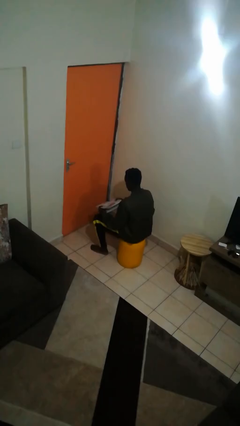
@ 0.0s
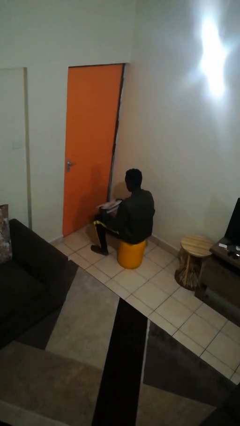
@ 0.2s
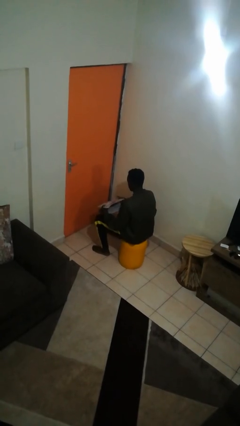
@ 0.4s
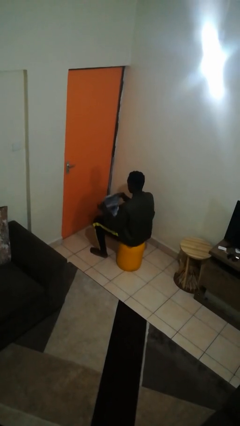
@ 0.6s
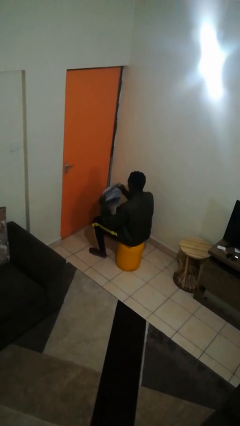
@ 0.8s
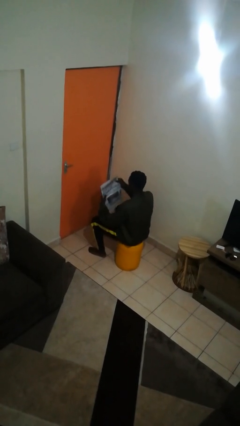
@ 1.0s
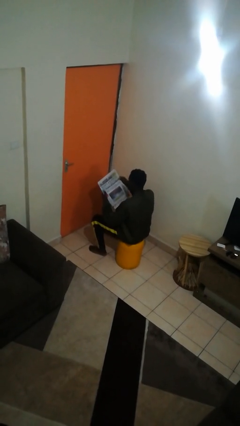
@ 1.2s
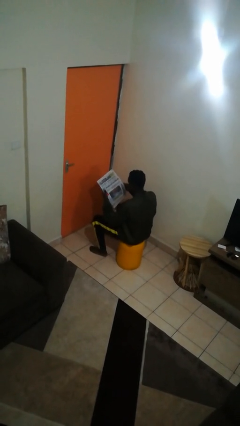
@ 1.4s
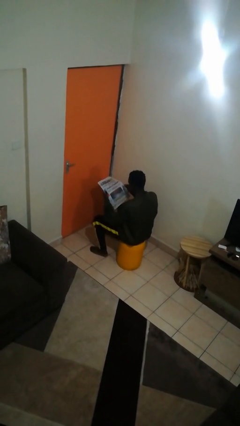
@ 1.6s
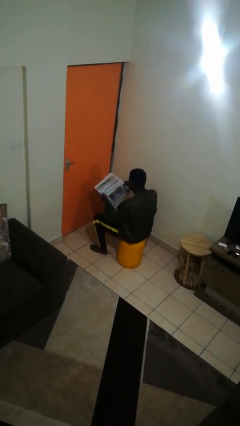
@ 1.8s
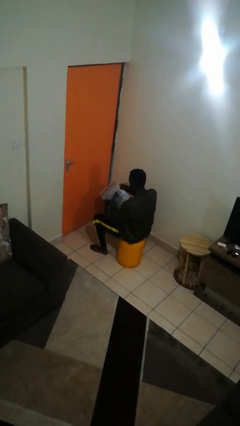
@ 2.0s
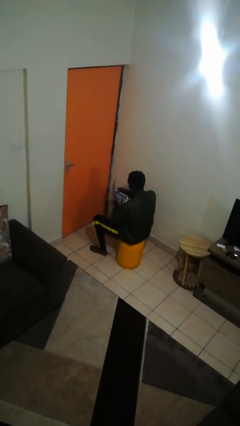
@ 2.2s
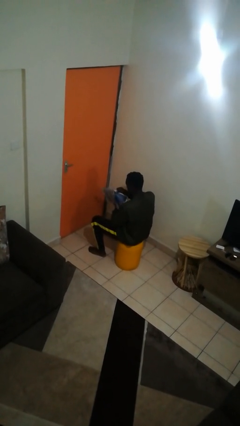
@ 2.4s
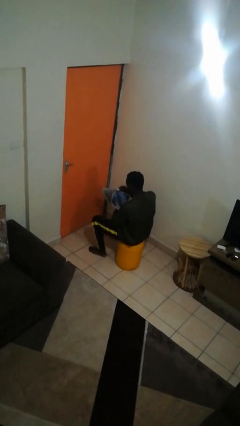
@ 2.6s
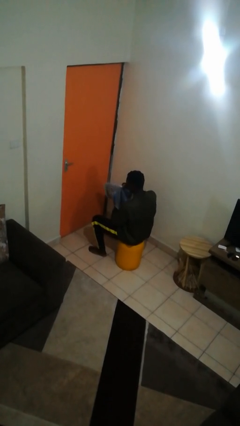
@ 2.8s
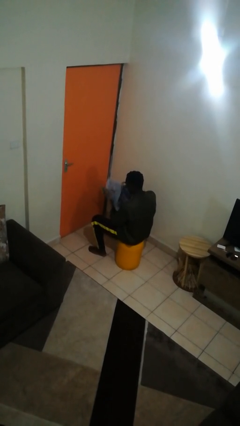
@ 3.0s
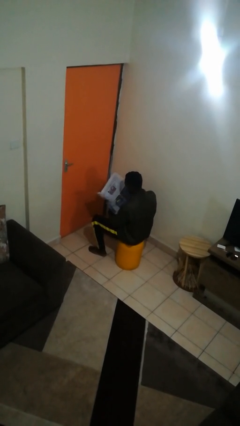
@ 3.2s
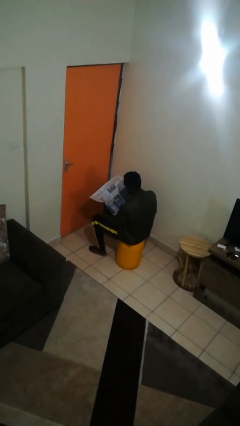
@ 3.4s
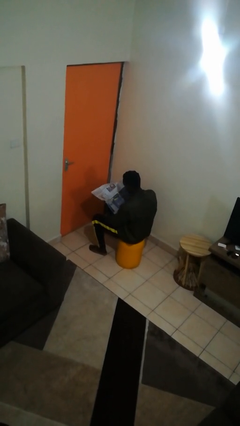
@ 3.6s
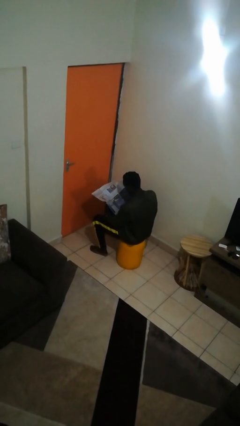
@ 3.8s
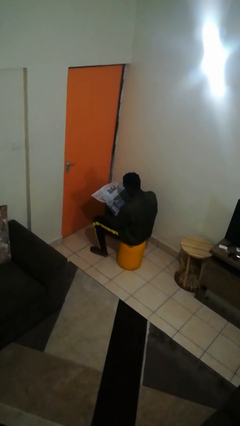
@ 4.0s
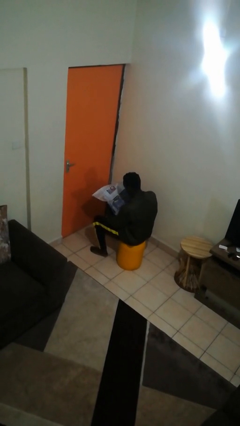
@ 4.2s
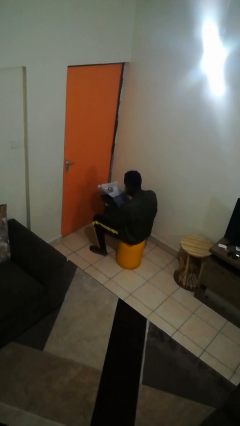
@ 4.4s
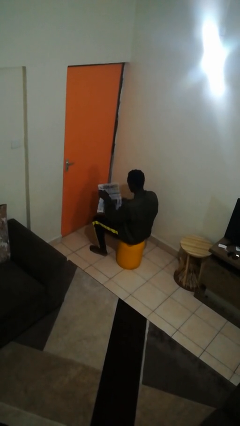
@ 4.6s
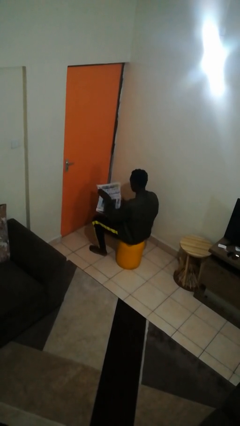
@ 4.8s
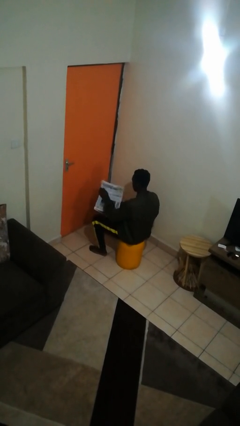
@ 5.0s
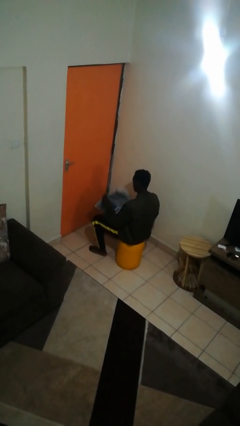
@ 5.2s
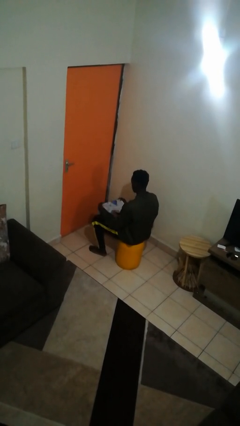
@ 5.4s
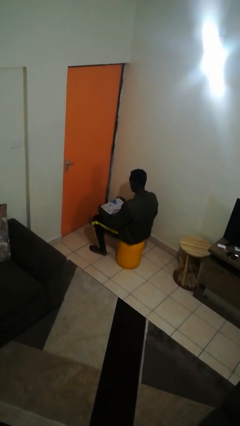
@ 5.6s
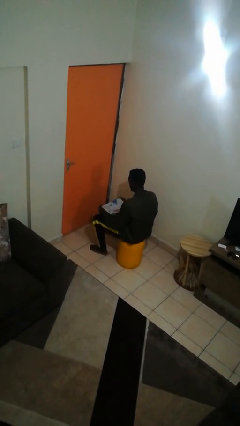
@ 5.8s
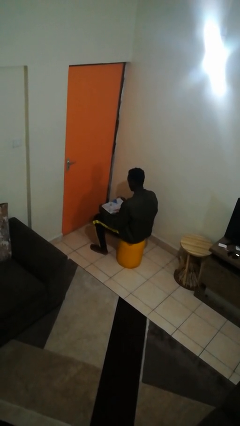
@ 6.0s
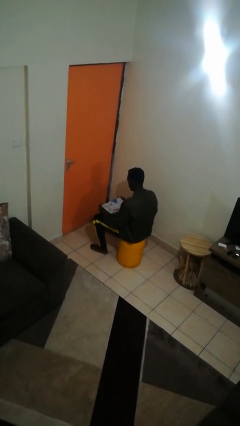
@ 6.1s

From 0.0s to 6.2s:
person reads newspaper

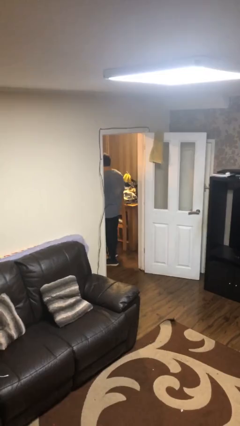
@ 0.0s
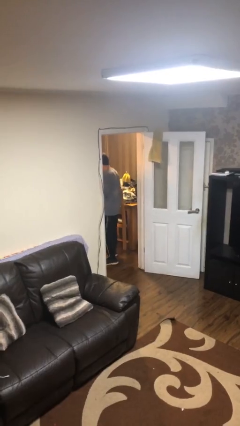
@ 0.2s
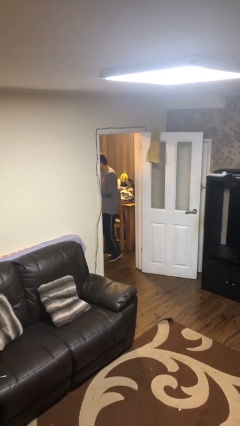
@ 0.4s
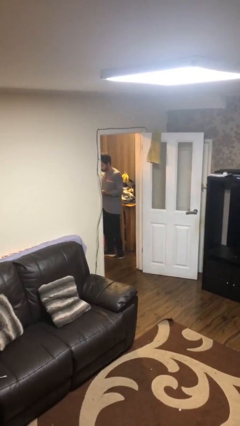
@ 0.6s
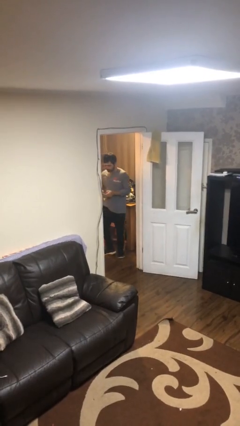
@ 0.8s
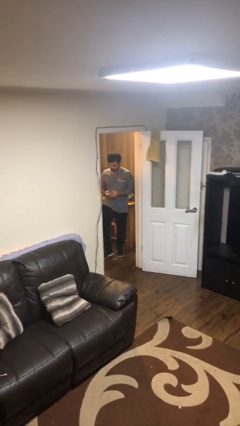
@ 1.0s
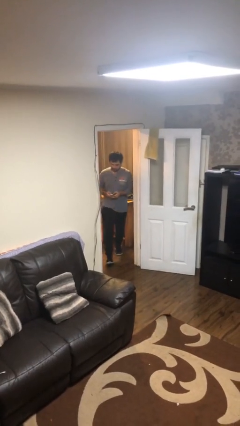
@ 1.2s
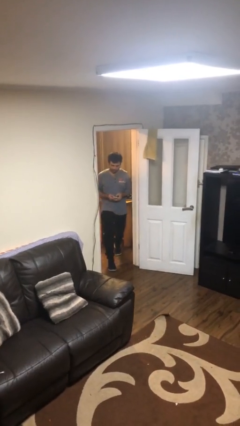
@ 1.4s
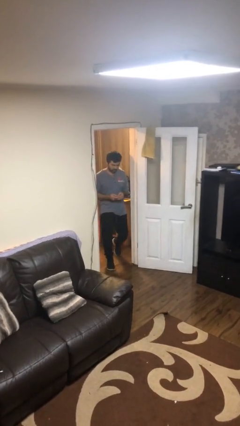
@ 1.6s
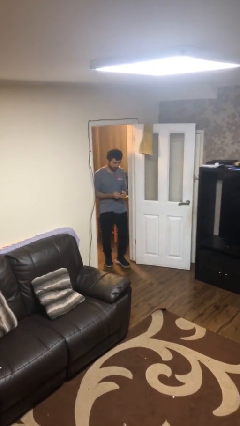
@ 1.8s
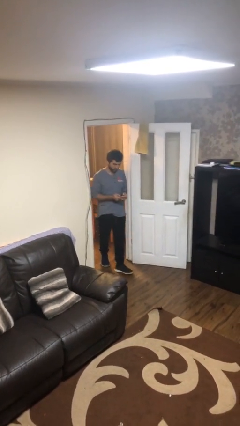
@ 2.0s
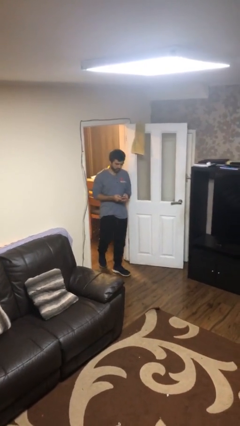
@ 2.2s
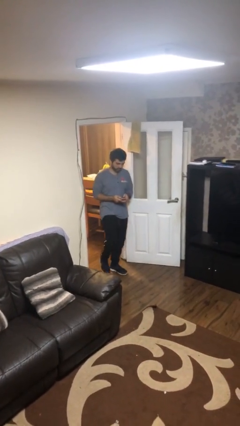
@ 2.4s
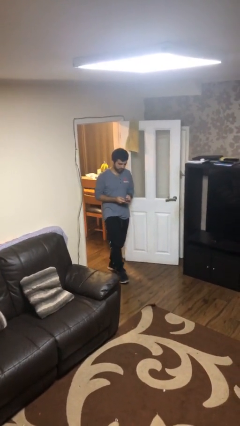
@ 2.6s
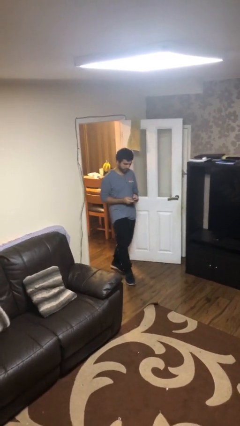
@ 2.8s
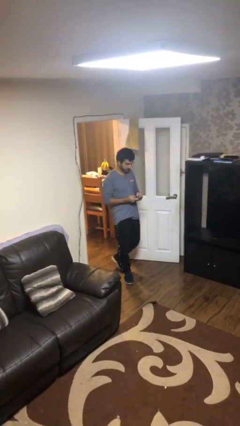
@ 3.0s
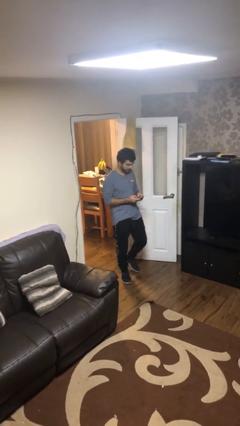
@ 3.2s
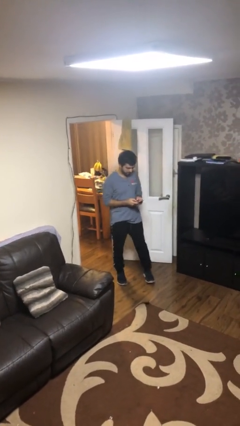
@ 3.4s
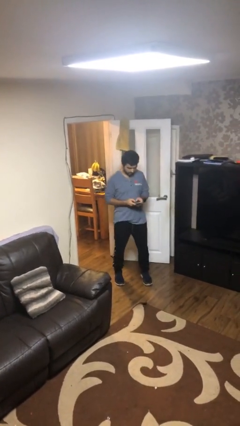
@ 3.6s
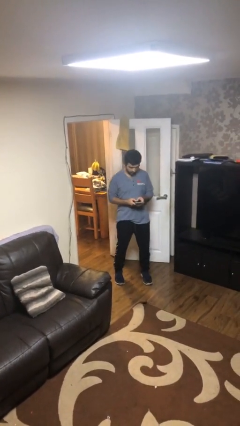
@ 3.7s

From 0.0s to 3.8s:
person enters scene through structure

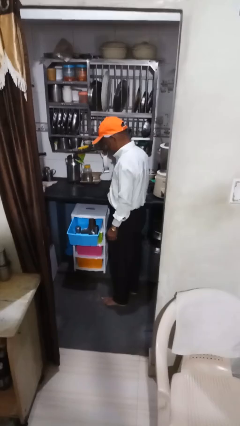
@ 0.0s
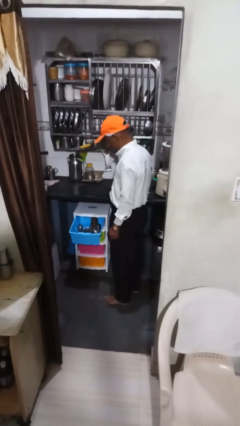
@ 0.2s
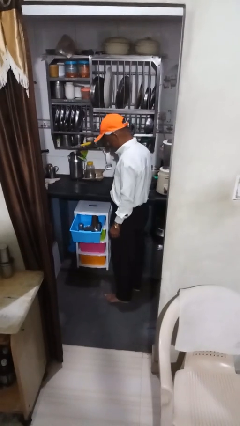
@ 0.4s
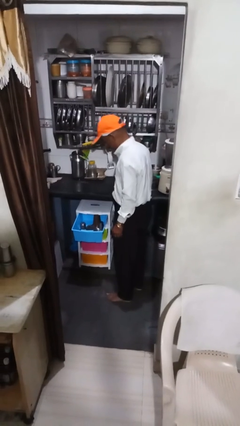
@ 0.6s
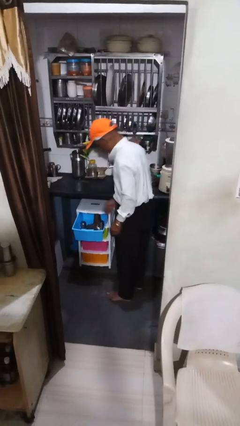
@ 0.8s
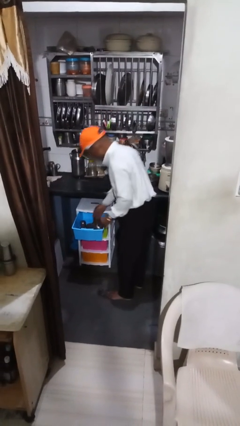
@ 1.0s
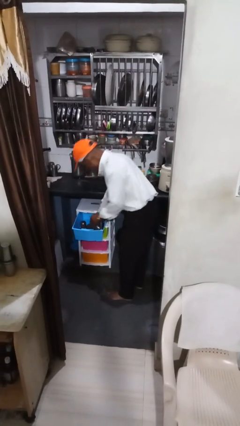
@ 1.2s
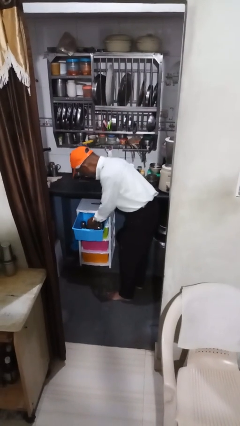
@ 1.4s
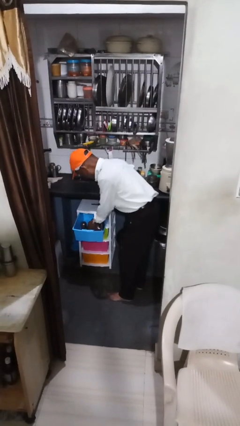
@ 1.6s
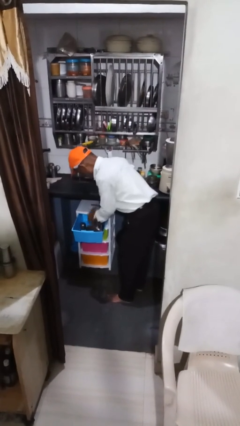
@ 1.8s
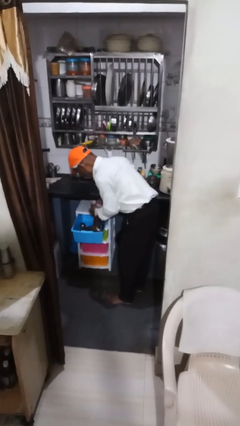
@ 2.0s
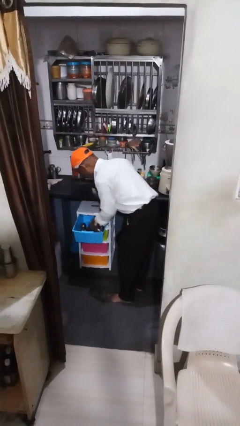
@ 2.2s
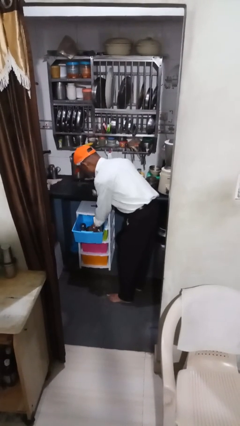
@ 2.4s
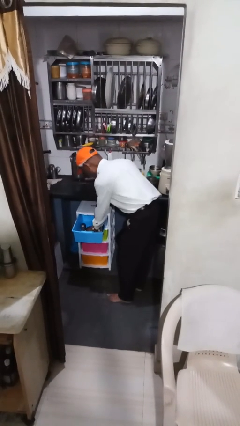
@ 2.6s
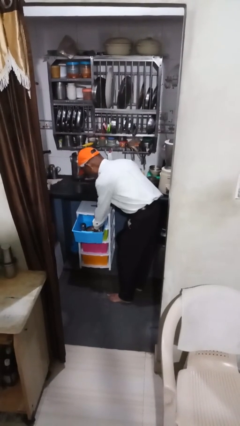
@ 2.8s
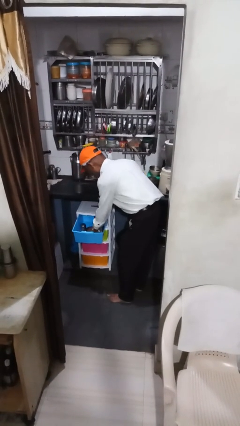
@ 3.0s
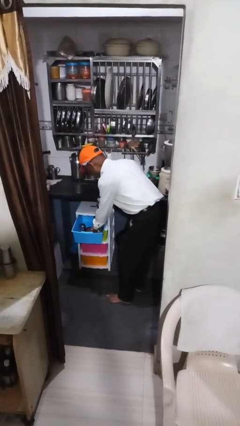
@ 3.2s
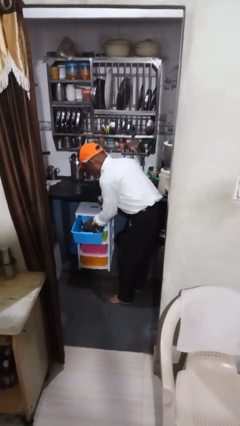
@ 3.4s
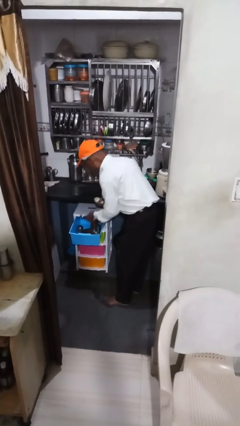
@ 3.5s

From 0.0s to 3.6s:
person takes object from kitchen drawer

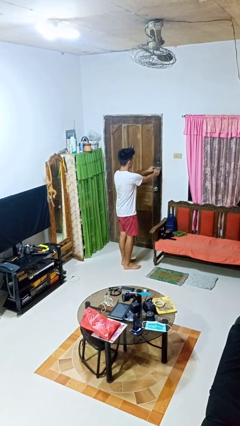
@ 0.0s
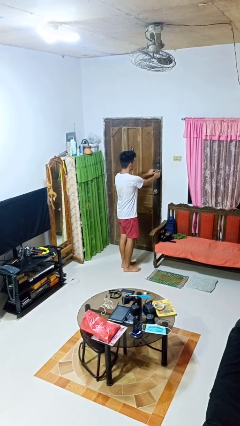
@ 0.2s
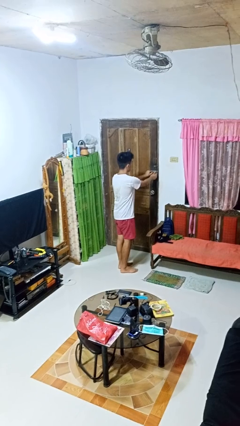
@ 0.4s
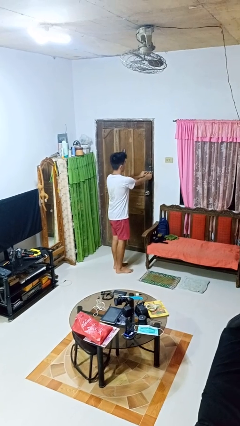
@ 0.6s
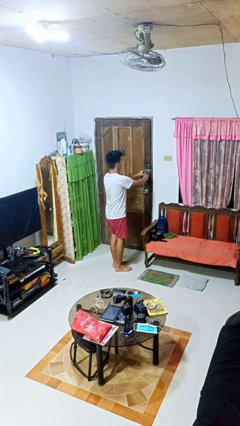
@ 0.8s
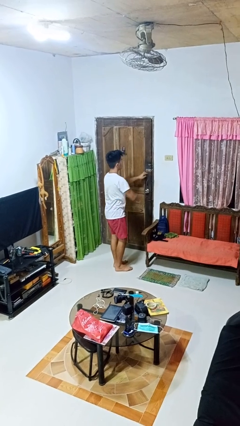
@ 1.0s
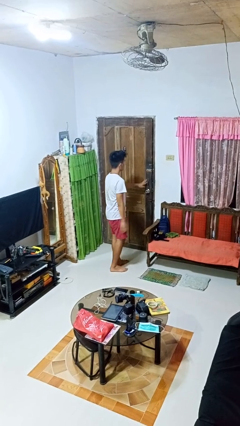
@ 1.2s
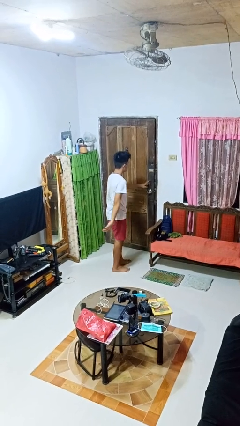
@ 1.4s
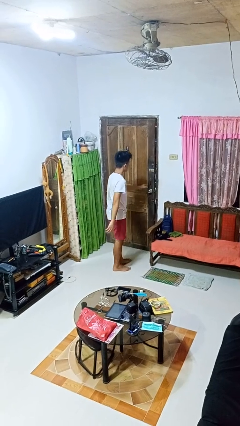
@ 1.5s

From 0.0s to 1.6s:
person unlocks door with keys

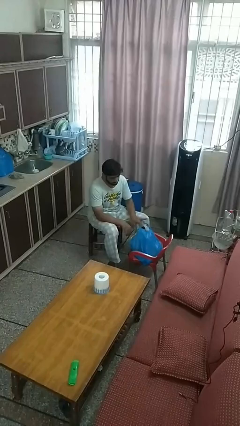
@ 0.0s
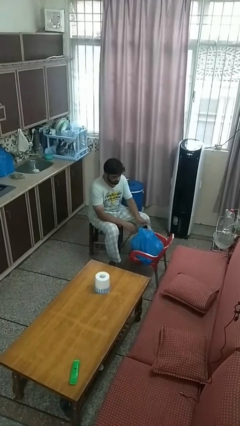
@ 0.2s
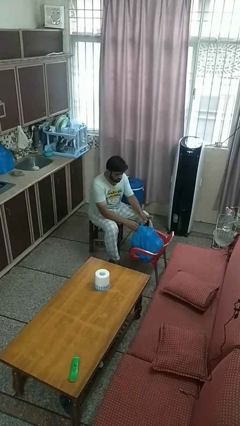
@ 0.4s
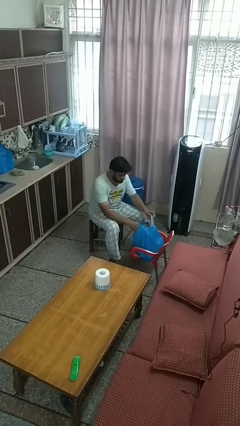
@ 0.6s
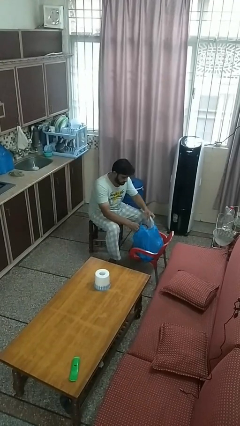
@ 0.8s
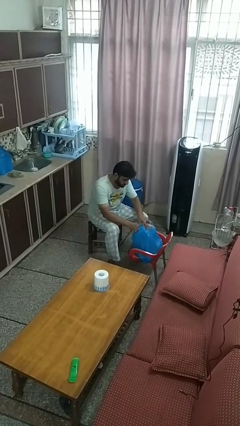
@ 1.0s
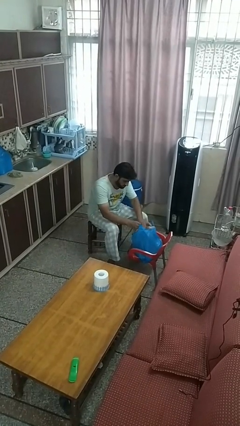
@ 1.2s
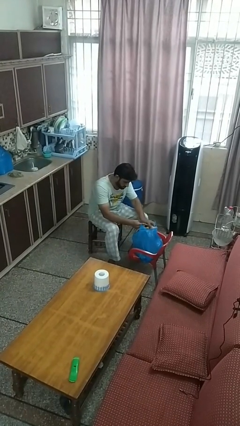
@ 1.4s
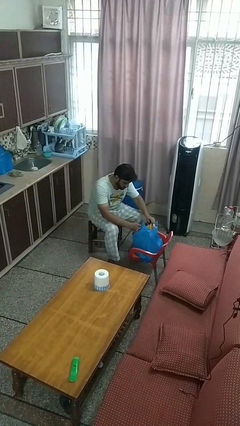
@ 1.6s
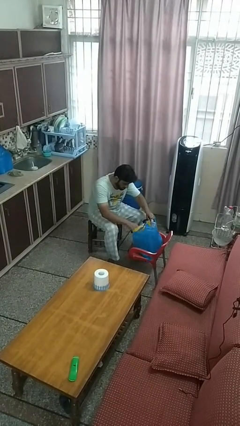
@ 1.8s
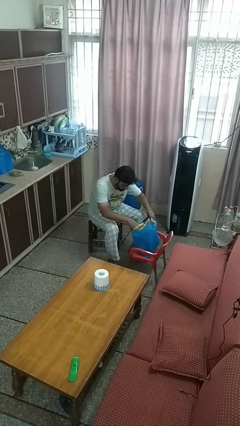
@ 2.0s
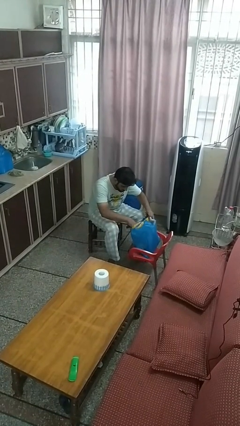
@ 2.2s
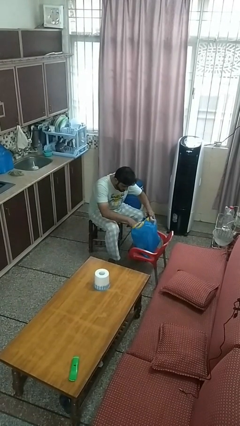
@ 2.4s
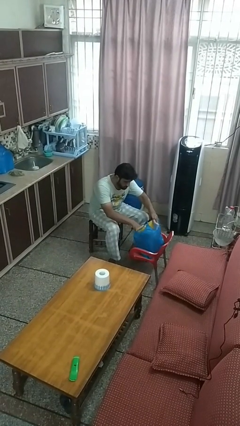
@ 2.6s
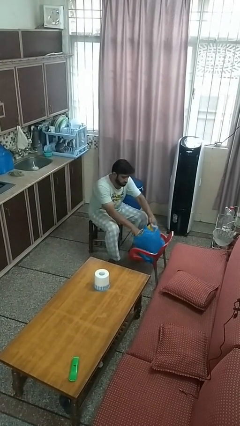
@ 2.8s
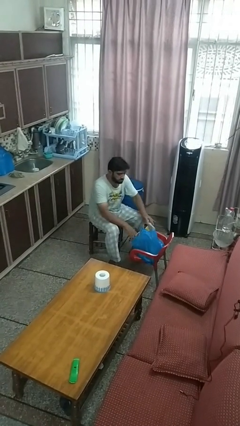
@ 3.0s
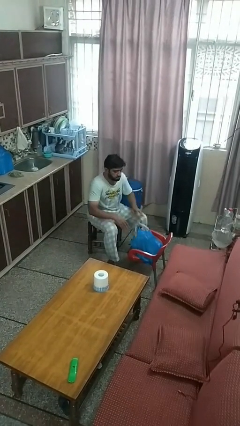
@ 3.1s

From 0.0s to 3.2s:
person searches in bag
